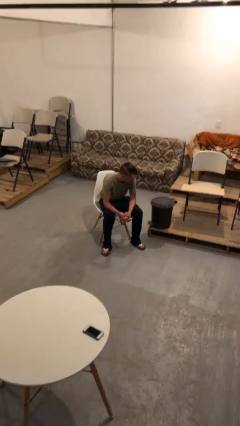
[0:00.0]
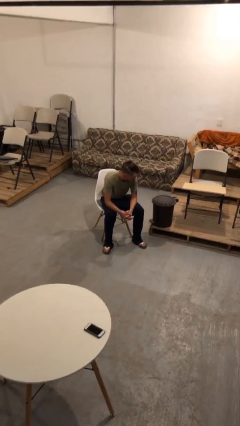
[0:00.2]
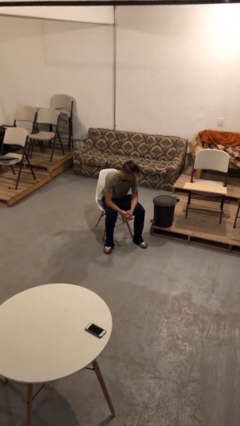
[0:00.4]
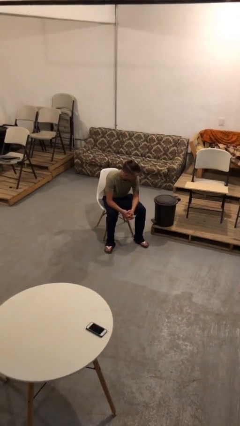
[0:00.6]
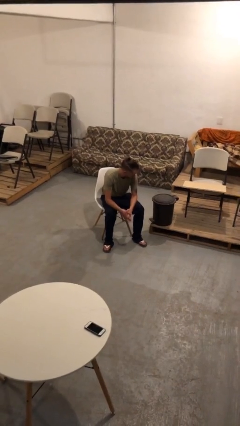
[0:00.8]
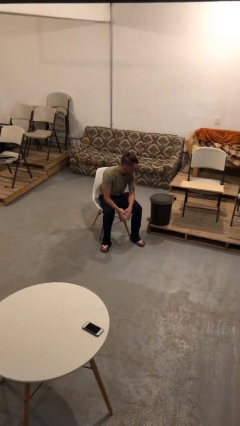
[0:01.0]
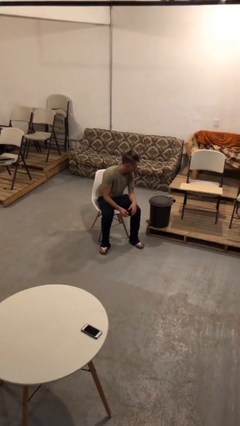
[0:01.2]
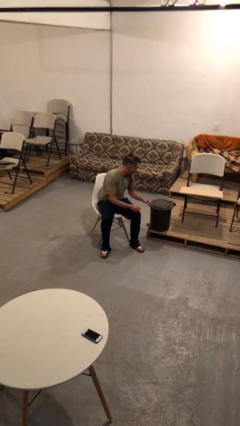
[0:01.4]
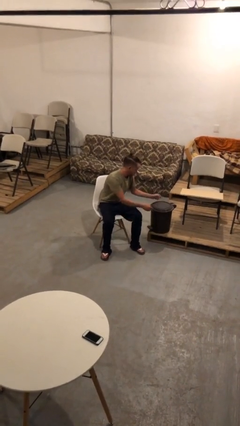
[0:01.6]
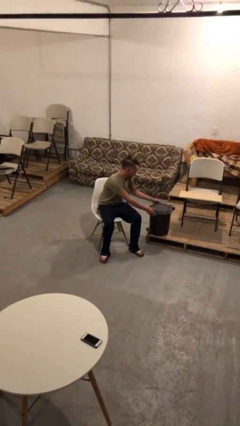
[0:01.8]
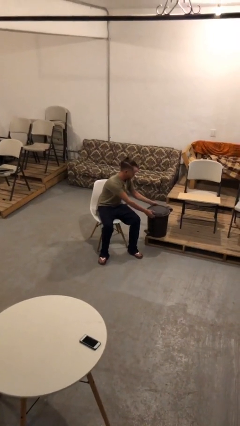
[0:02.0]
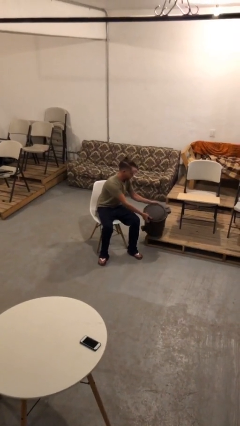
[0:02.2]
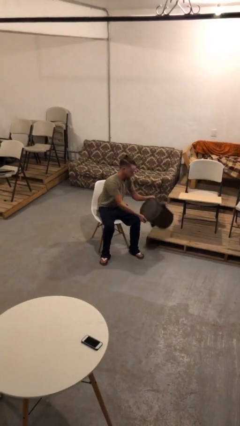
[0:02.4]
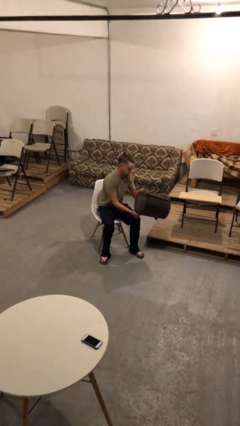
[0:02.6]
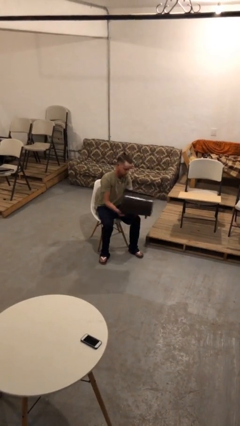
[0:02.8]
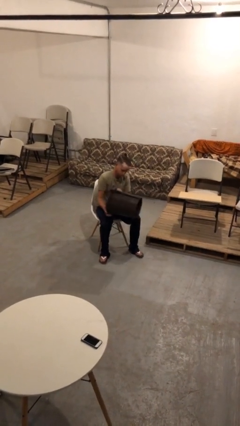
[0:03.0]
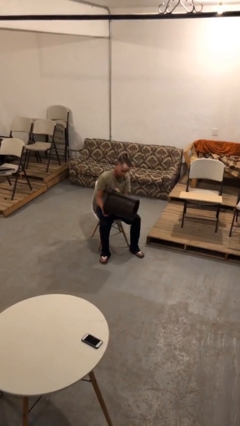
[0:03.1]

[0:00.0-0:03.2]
person picks up object from floor

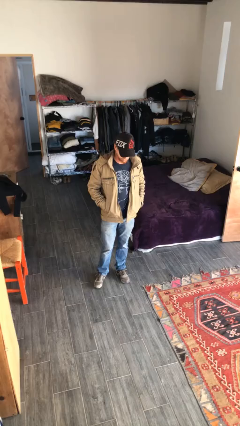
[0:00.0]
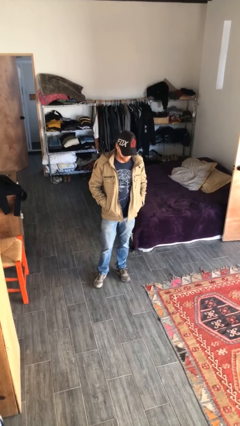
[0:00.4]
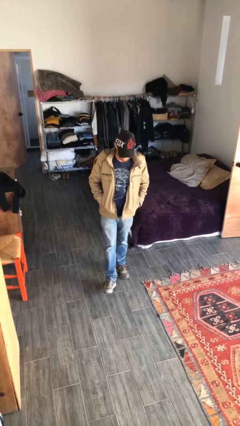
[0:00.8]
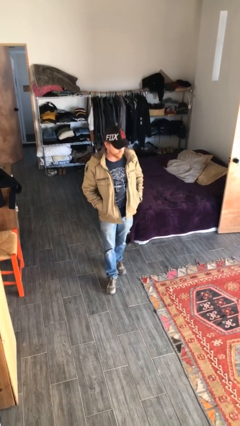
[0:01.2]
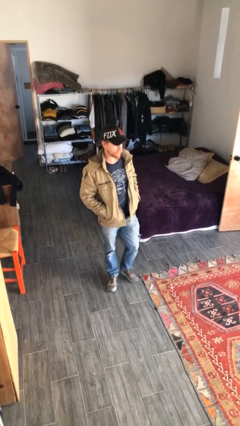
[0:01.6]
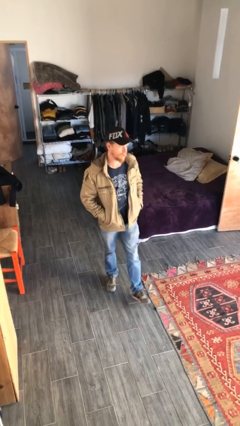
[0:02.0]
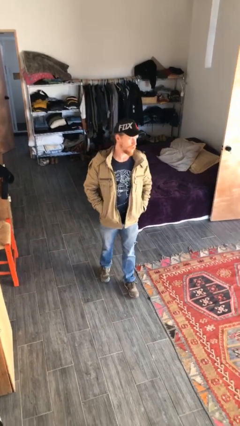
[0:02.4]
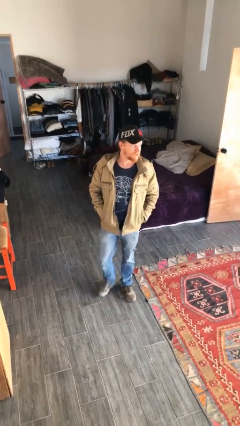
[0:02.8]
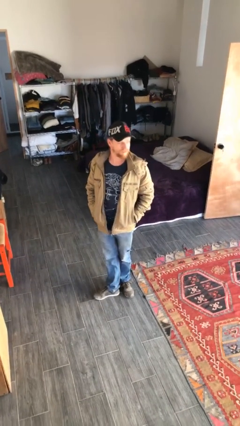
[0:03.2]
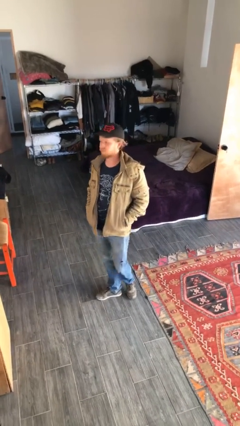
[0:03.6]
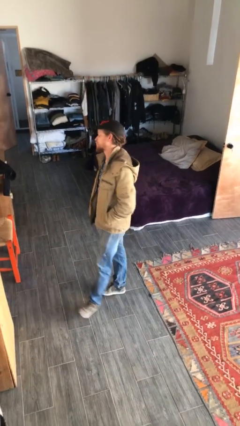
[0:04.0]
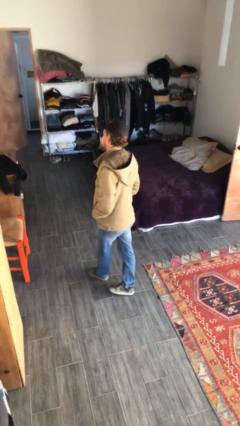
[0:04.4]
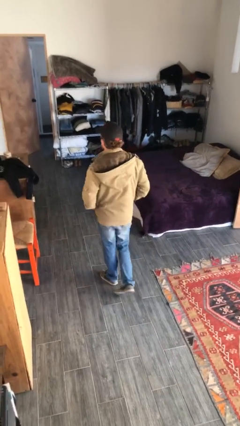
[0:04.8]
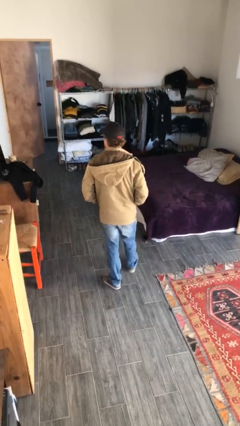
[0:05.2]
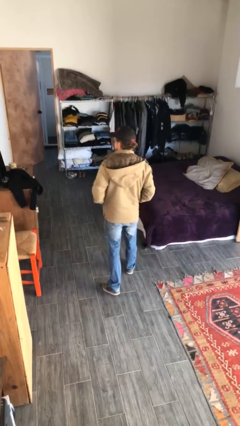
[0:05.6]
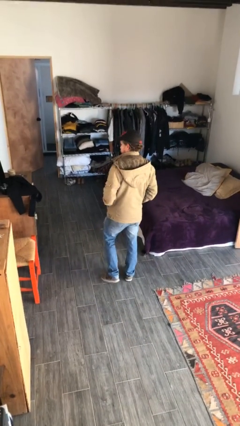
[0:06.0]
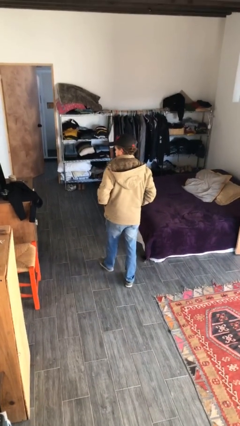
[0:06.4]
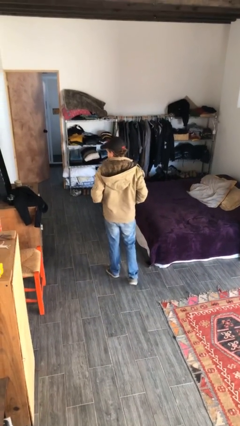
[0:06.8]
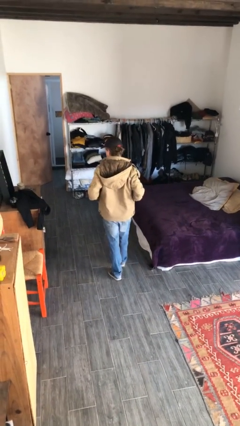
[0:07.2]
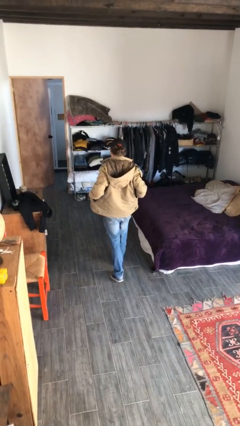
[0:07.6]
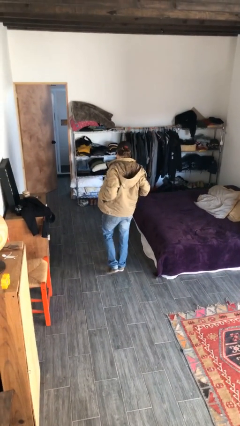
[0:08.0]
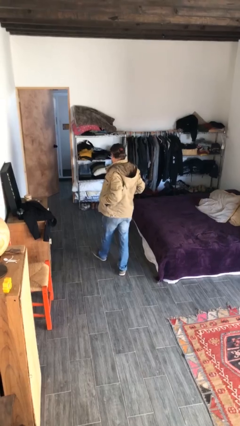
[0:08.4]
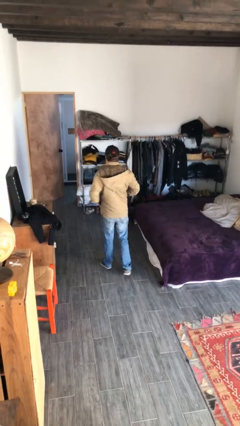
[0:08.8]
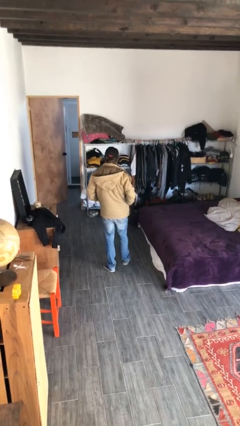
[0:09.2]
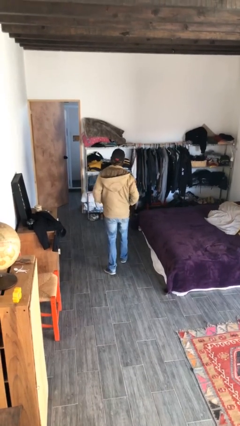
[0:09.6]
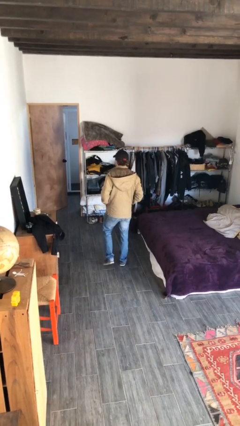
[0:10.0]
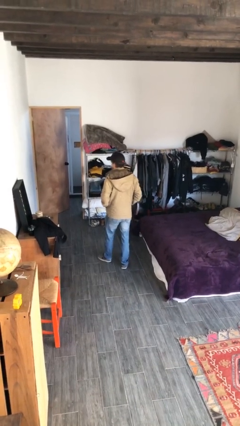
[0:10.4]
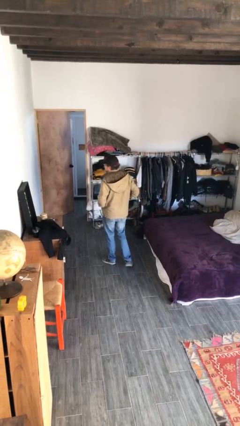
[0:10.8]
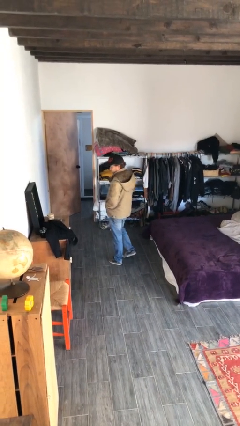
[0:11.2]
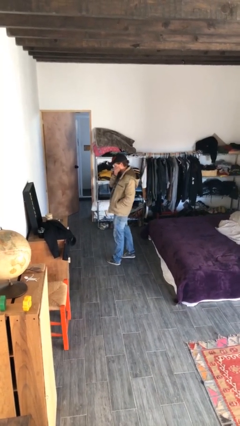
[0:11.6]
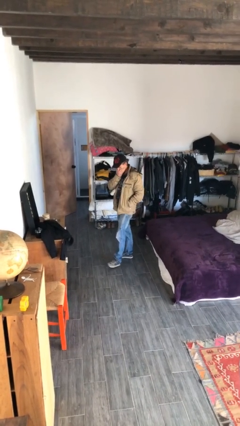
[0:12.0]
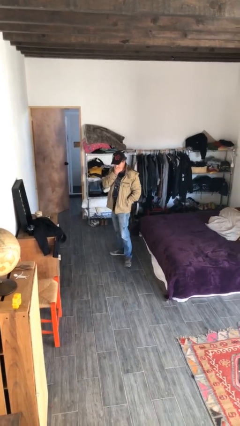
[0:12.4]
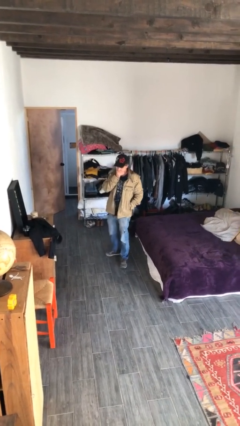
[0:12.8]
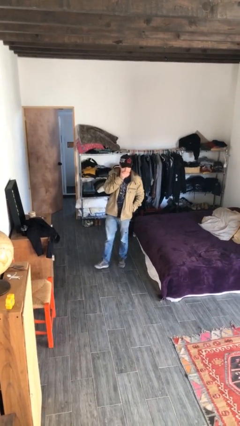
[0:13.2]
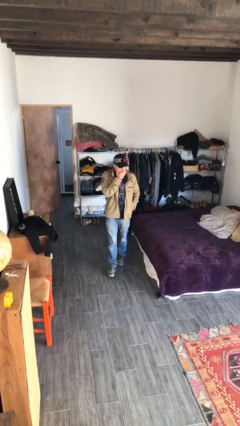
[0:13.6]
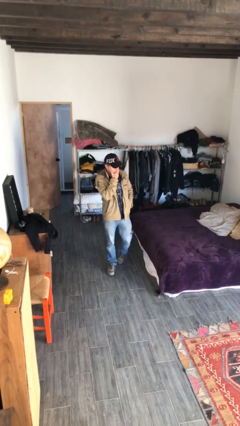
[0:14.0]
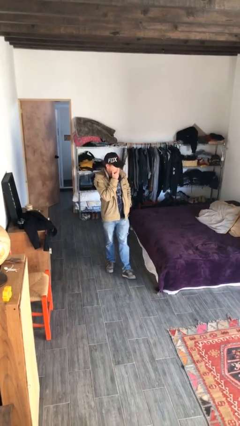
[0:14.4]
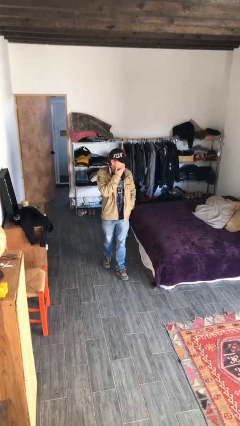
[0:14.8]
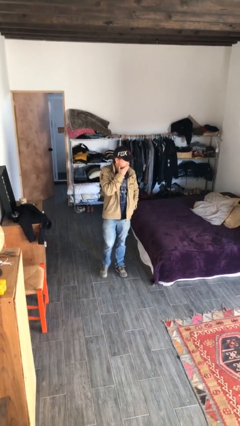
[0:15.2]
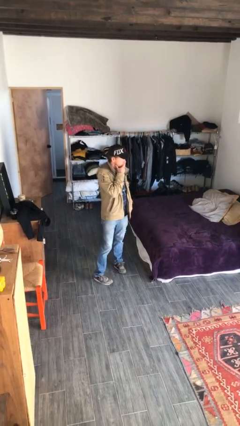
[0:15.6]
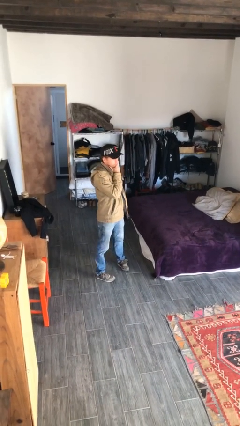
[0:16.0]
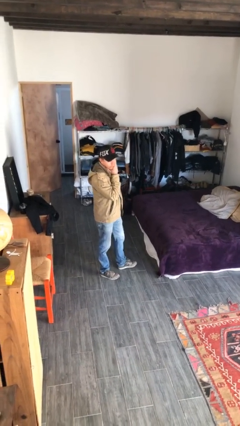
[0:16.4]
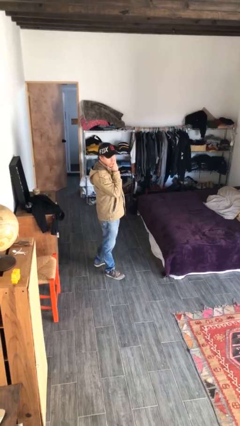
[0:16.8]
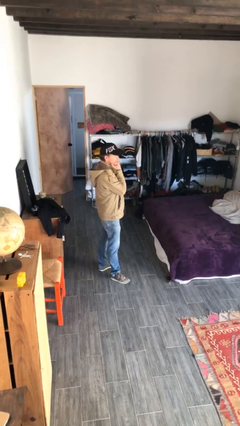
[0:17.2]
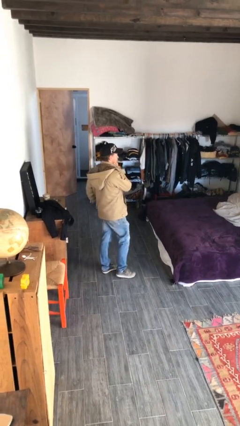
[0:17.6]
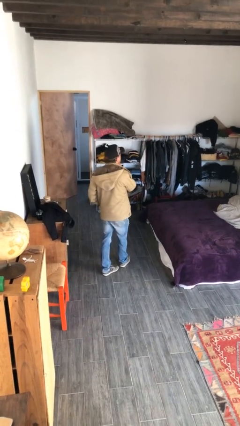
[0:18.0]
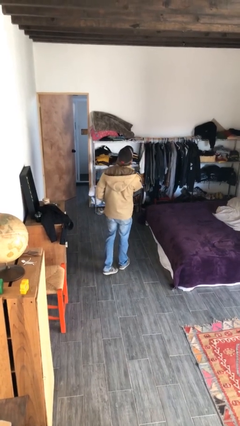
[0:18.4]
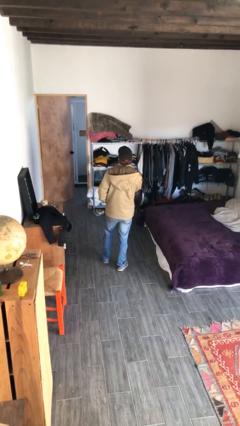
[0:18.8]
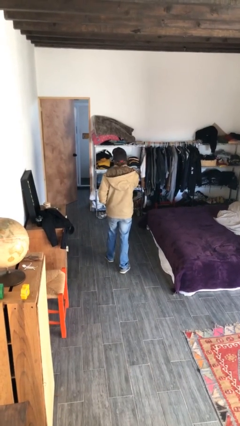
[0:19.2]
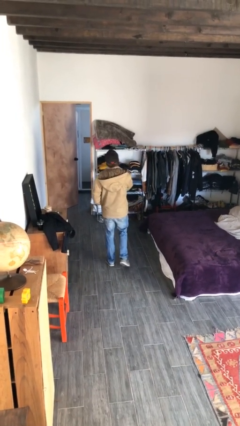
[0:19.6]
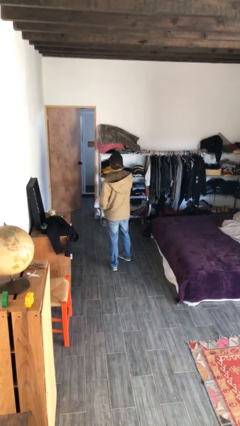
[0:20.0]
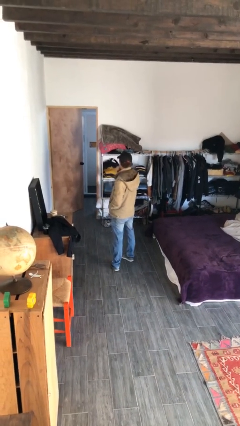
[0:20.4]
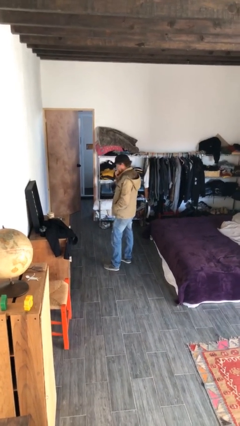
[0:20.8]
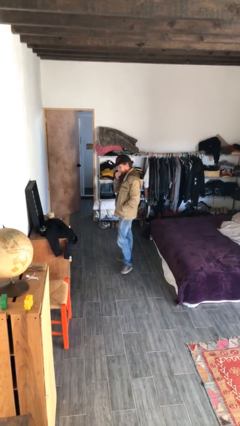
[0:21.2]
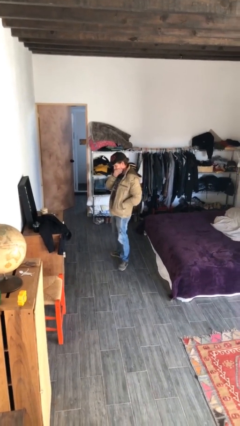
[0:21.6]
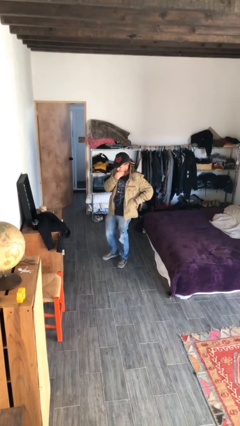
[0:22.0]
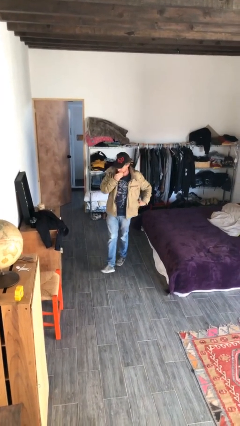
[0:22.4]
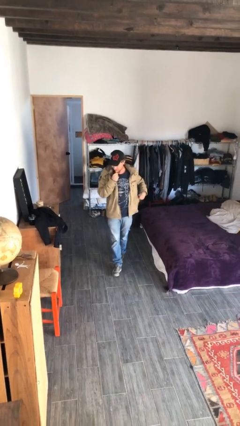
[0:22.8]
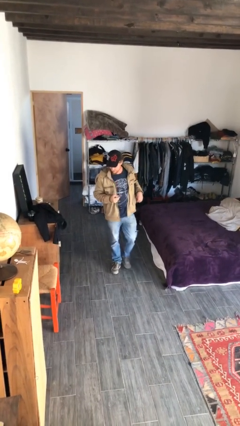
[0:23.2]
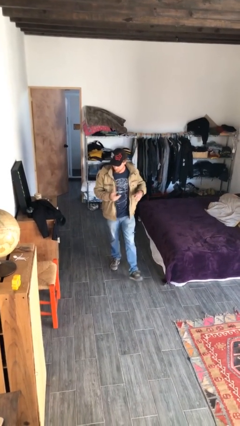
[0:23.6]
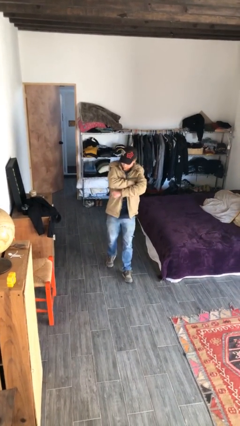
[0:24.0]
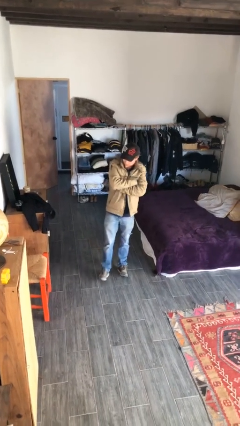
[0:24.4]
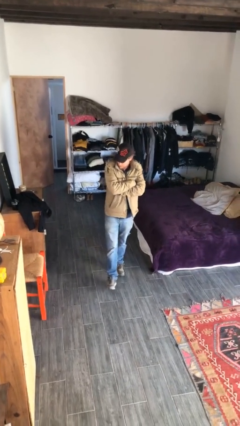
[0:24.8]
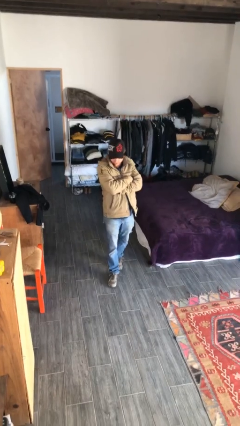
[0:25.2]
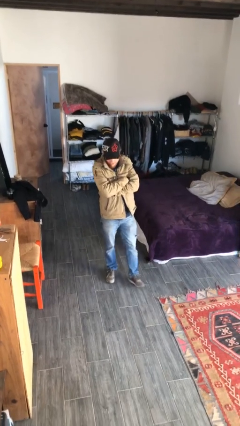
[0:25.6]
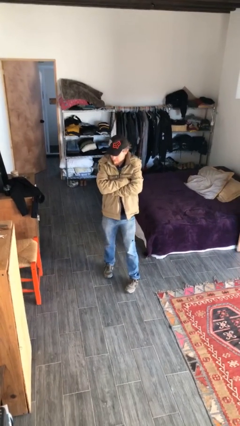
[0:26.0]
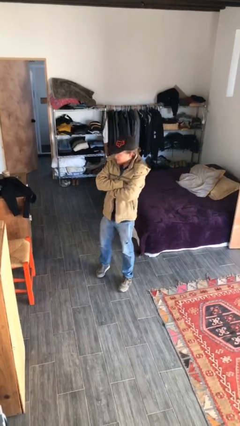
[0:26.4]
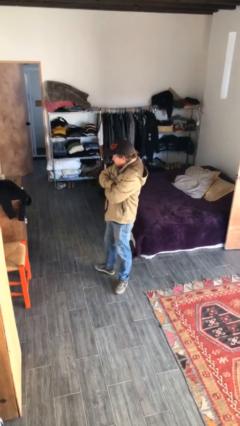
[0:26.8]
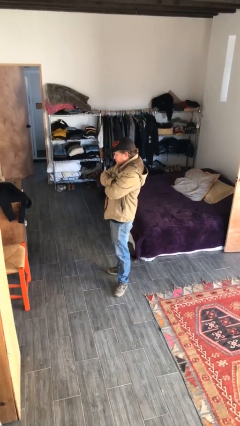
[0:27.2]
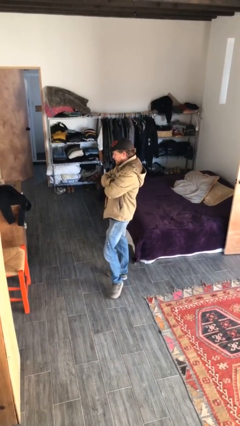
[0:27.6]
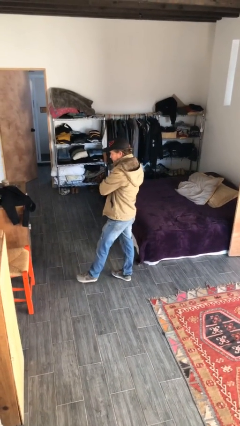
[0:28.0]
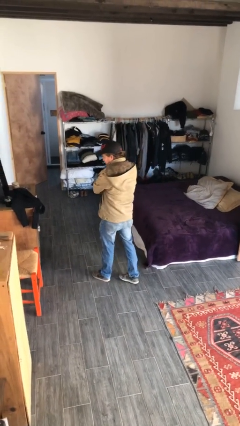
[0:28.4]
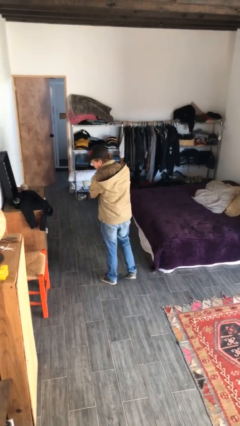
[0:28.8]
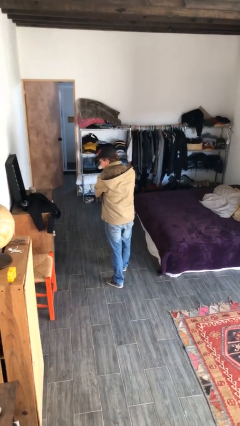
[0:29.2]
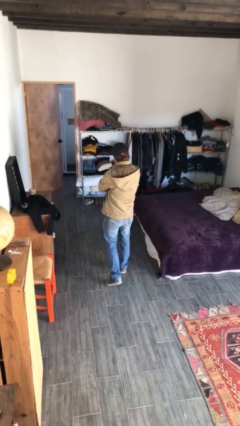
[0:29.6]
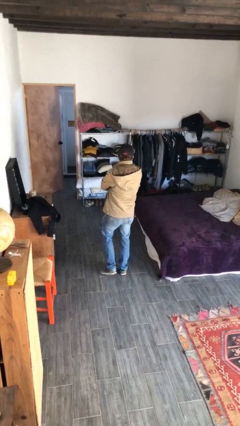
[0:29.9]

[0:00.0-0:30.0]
person walks

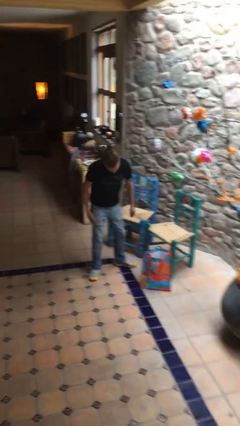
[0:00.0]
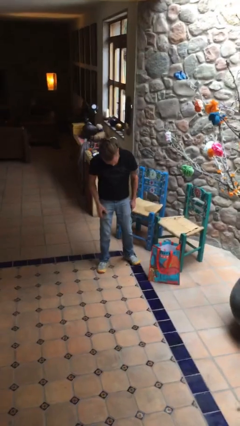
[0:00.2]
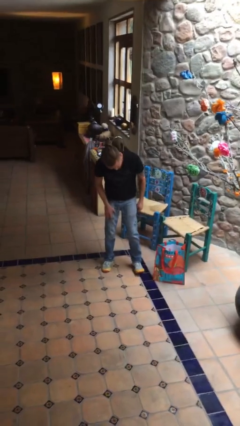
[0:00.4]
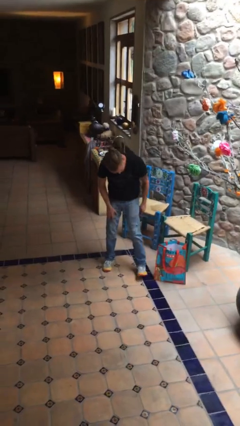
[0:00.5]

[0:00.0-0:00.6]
person searches in bag
